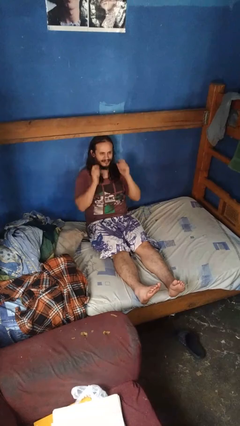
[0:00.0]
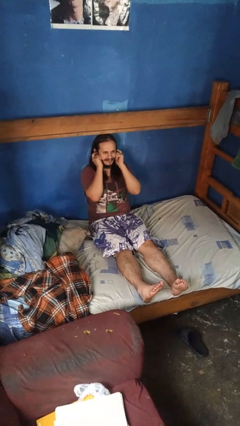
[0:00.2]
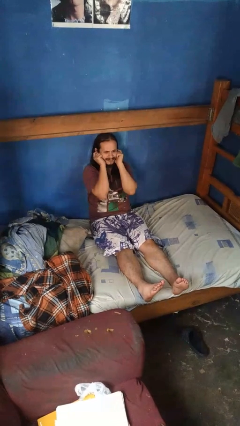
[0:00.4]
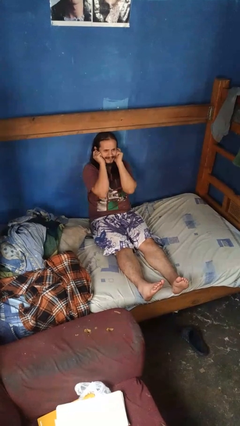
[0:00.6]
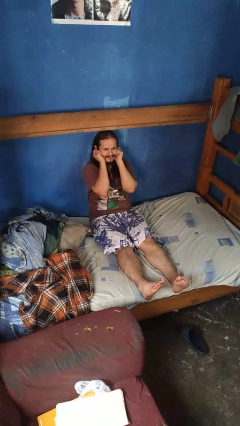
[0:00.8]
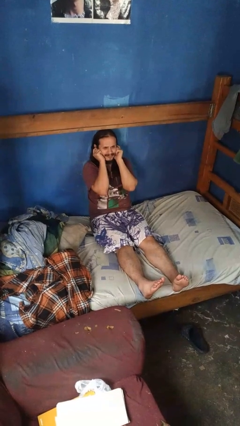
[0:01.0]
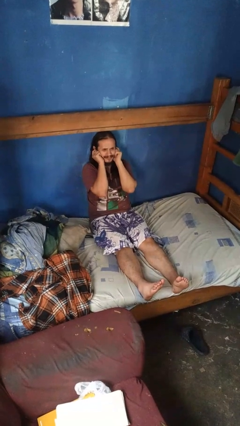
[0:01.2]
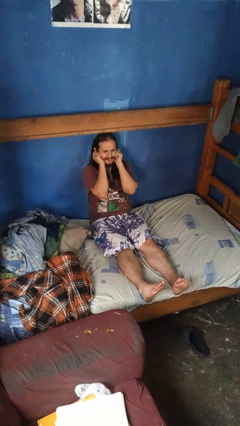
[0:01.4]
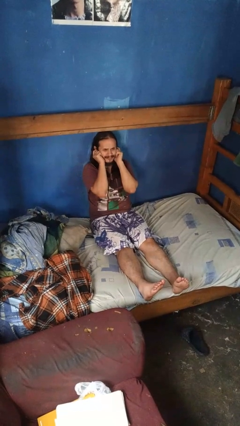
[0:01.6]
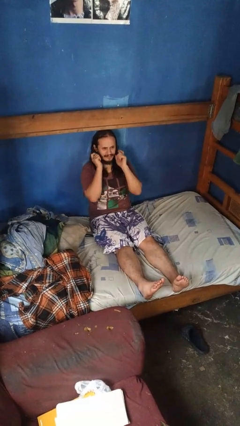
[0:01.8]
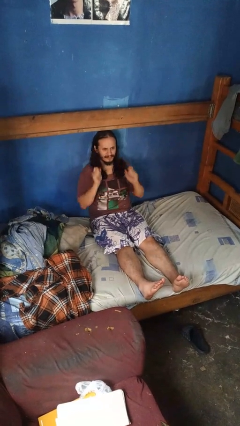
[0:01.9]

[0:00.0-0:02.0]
person puts fingers in ear

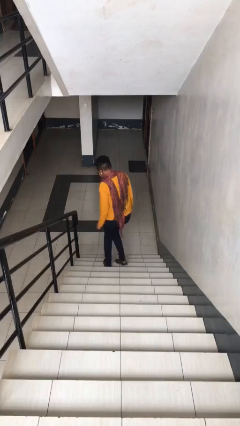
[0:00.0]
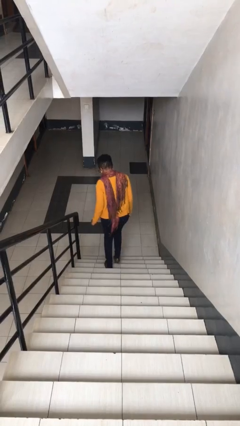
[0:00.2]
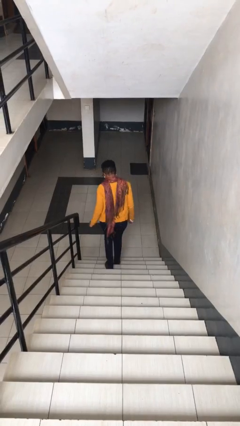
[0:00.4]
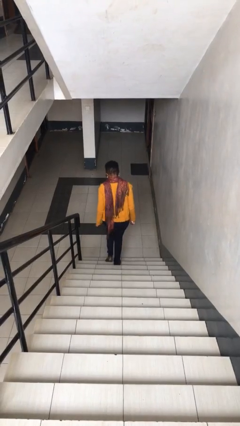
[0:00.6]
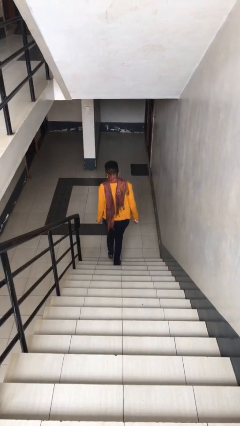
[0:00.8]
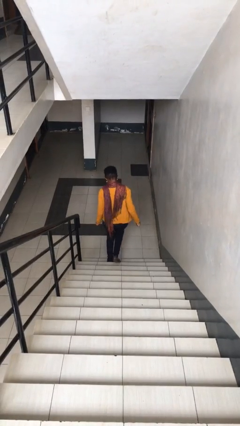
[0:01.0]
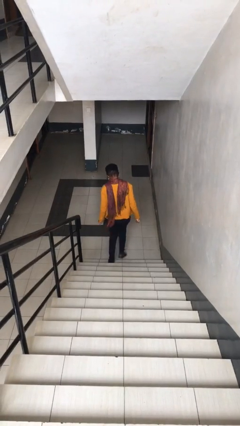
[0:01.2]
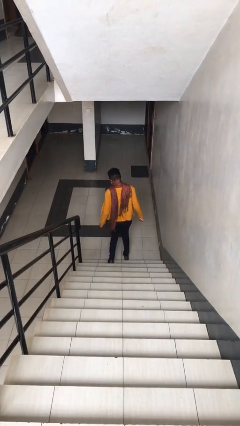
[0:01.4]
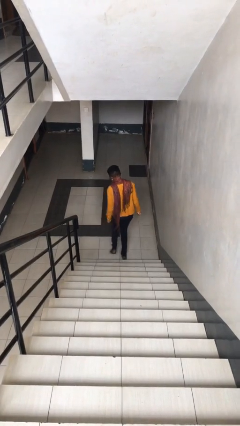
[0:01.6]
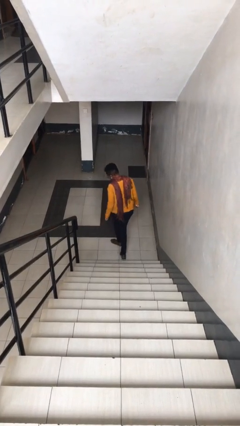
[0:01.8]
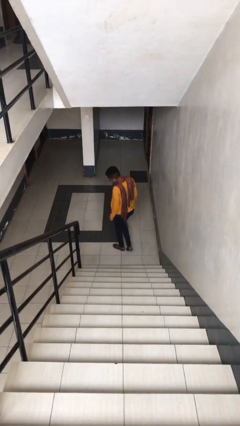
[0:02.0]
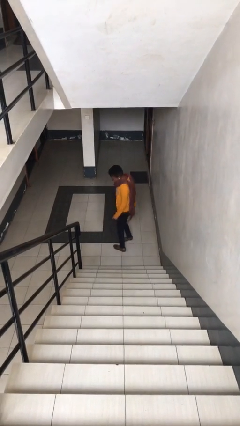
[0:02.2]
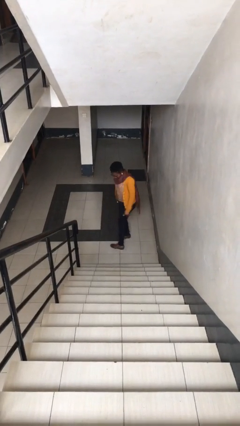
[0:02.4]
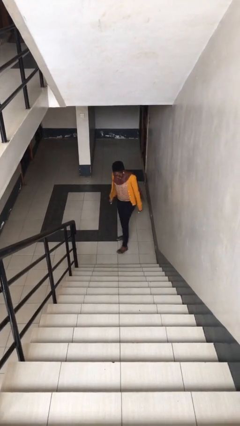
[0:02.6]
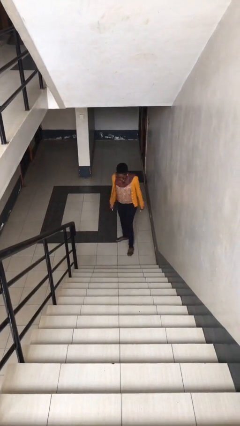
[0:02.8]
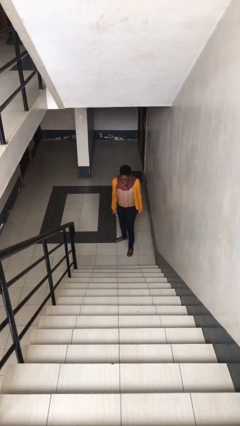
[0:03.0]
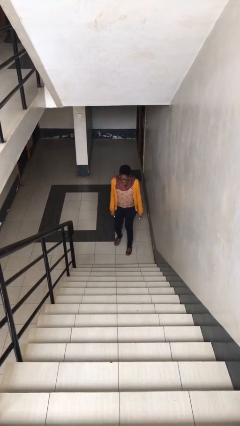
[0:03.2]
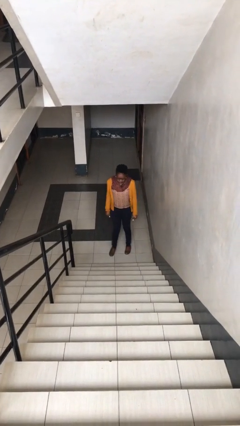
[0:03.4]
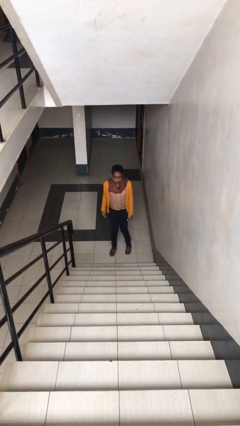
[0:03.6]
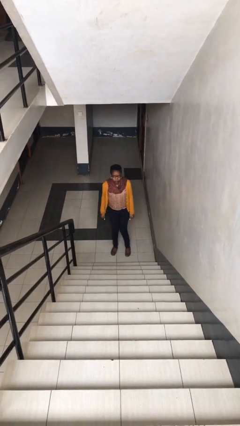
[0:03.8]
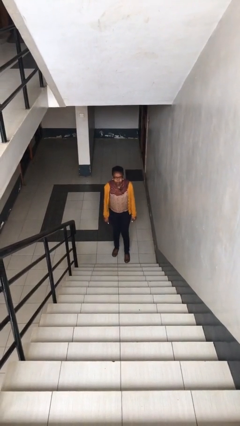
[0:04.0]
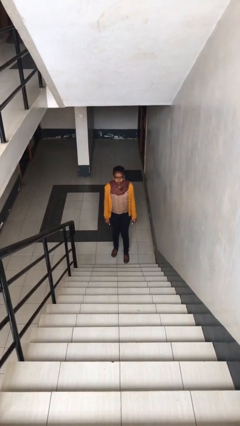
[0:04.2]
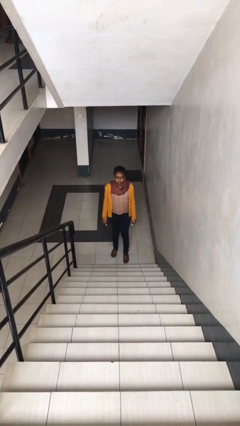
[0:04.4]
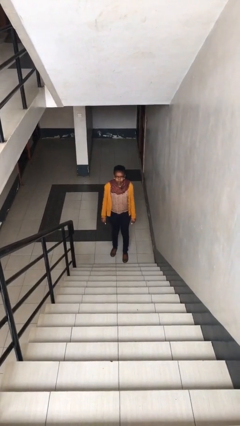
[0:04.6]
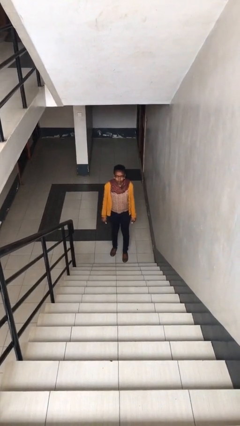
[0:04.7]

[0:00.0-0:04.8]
person climbs down stairs

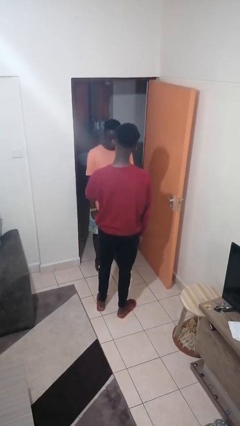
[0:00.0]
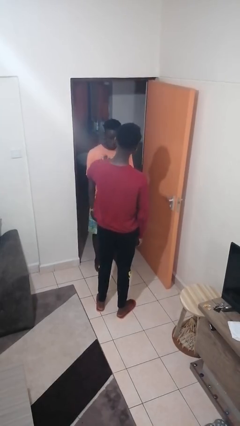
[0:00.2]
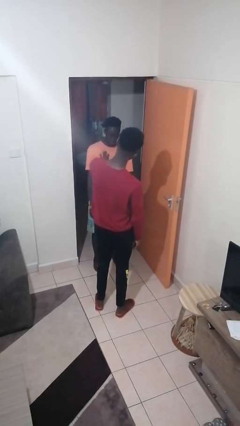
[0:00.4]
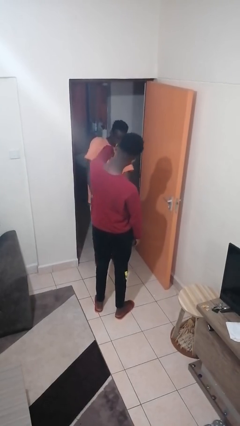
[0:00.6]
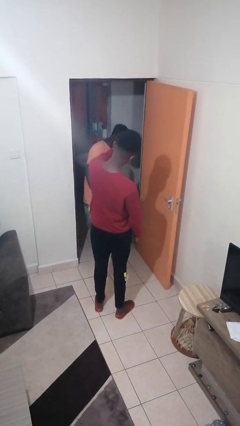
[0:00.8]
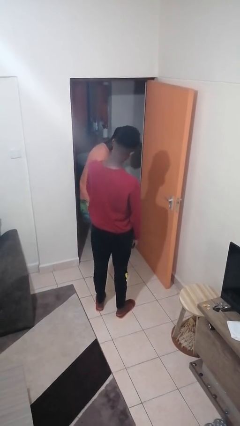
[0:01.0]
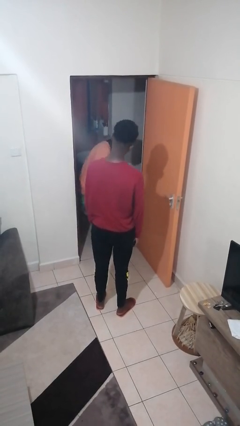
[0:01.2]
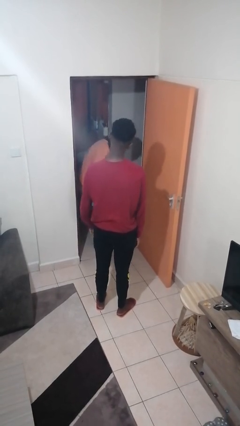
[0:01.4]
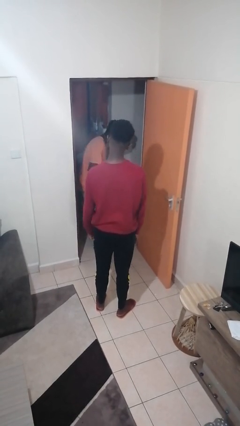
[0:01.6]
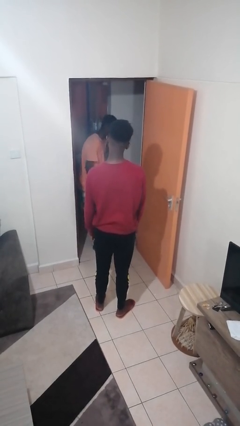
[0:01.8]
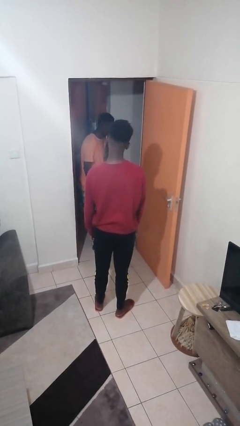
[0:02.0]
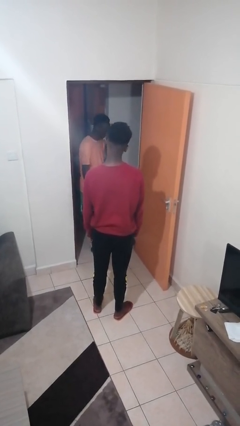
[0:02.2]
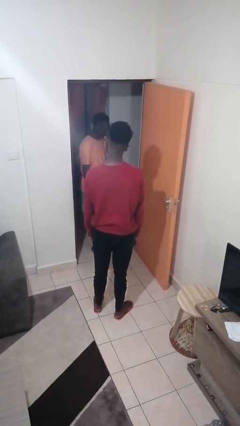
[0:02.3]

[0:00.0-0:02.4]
person shoves person

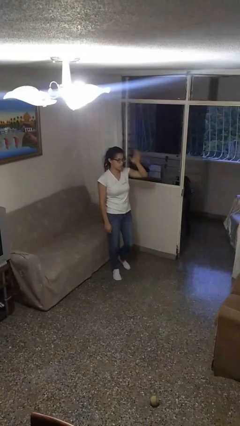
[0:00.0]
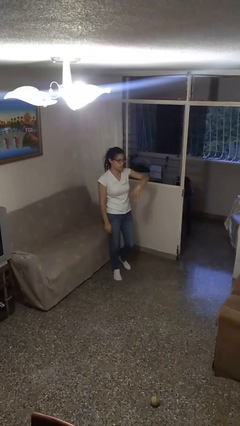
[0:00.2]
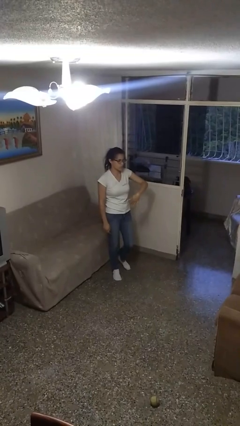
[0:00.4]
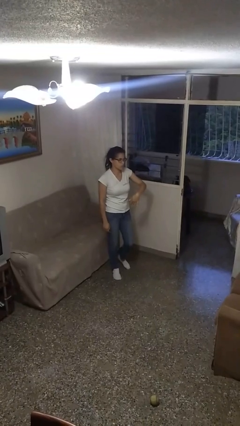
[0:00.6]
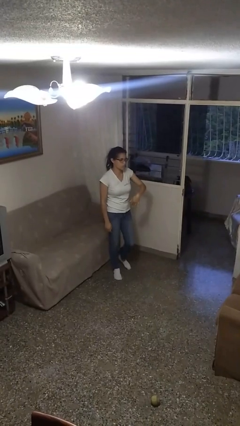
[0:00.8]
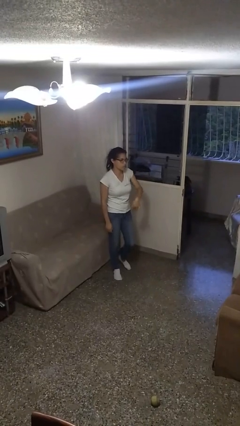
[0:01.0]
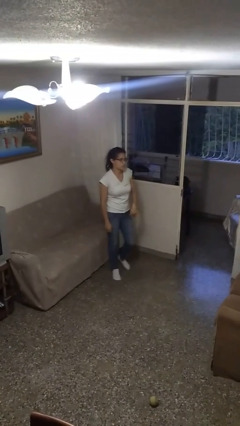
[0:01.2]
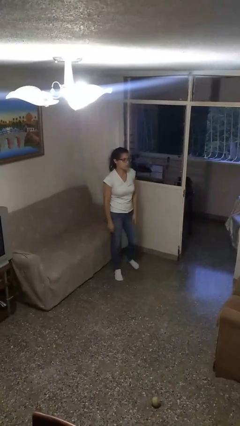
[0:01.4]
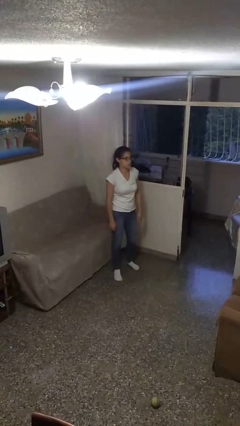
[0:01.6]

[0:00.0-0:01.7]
person gestures swipe down

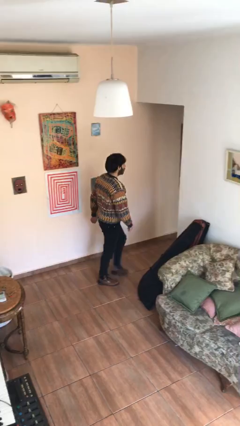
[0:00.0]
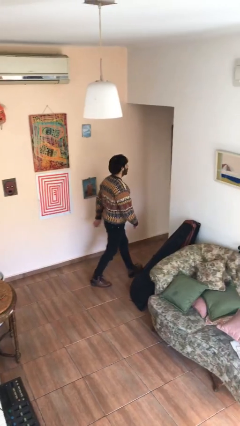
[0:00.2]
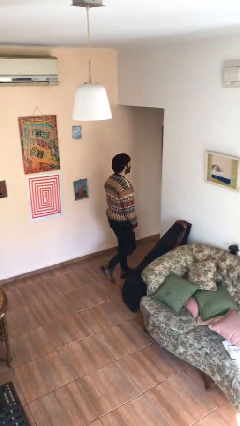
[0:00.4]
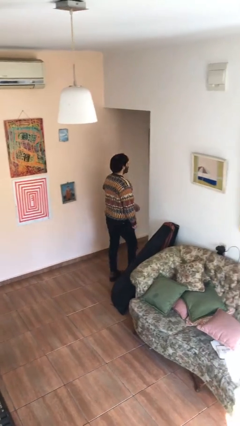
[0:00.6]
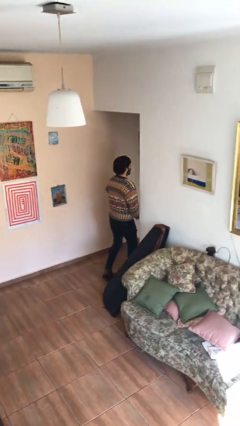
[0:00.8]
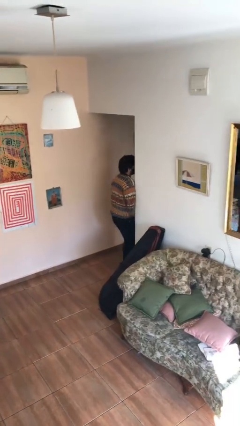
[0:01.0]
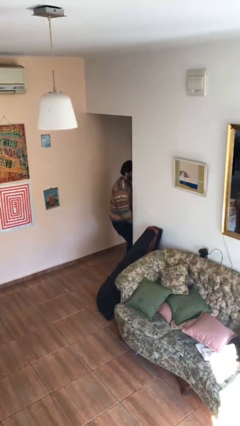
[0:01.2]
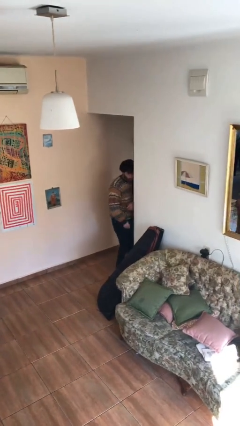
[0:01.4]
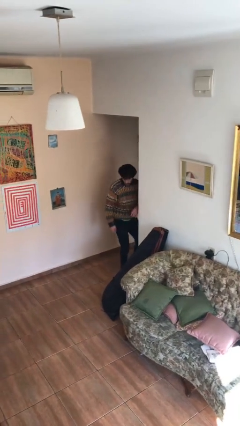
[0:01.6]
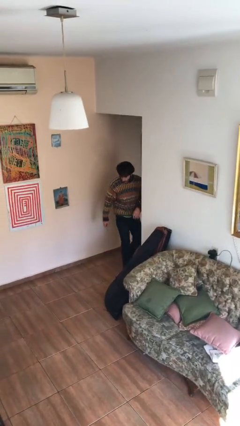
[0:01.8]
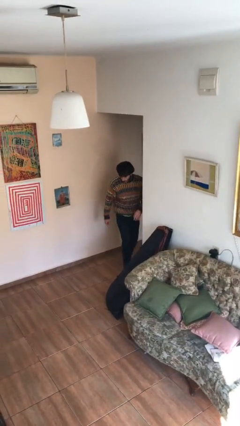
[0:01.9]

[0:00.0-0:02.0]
person bumps into wall

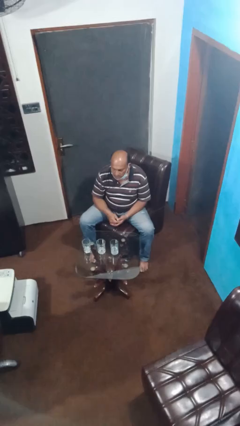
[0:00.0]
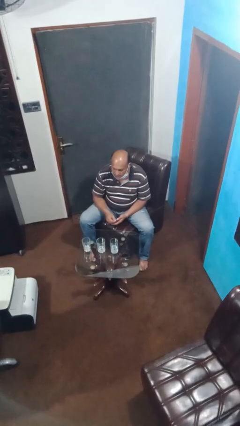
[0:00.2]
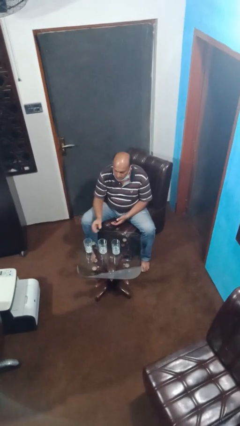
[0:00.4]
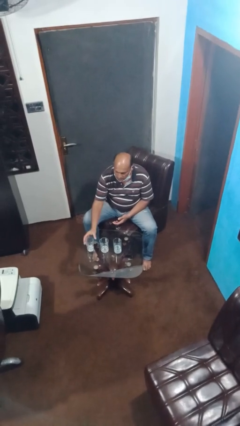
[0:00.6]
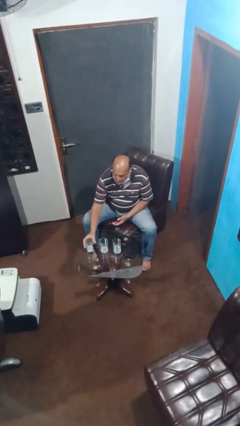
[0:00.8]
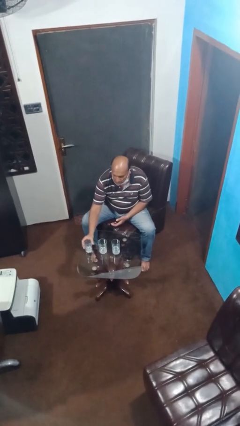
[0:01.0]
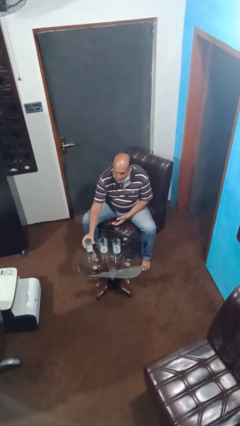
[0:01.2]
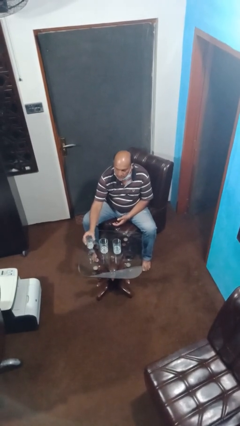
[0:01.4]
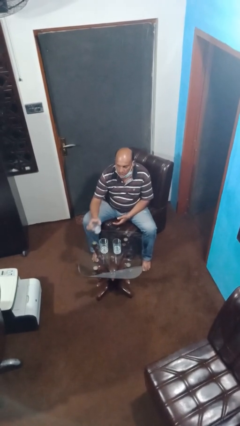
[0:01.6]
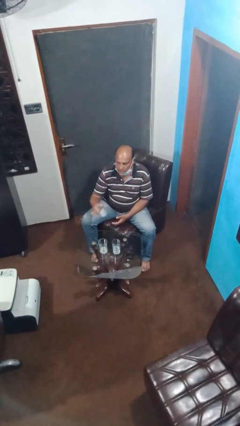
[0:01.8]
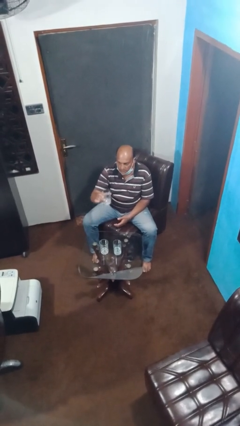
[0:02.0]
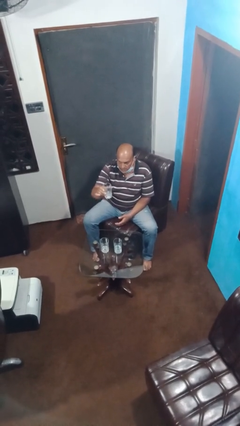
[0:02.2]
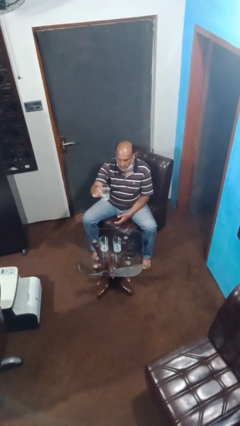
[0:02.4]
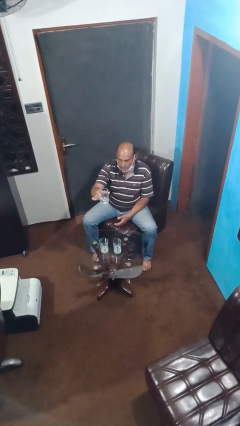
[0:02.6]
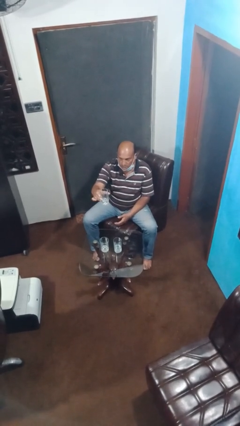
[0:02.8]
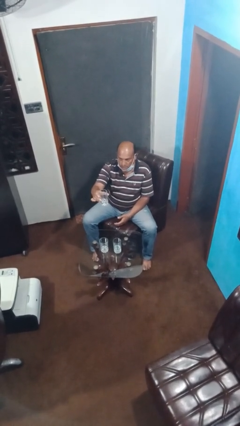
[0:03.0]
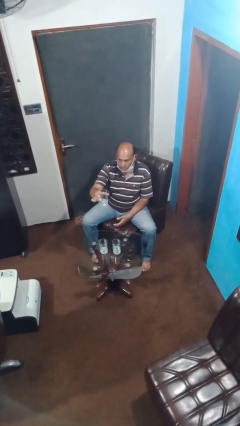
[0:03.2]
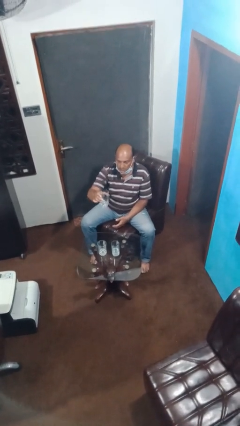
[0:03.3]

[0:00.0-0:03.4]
person picks up object from table

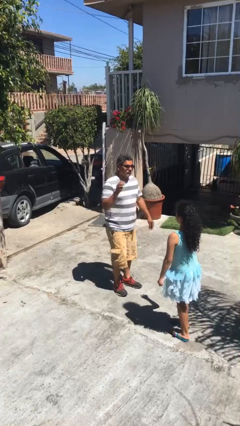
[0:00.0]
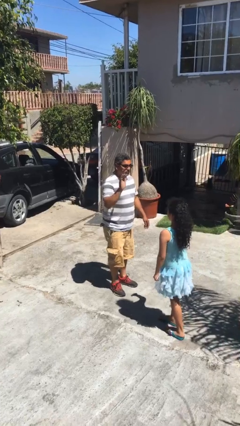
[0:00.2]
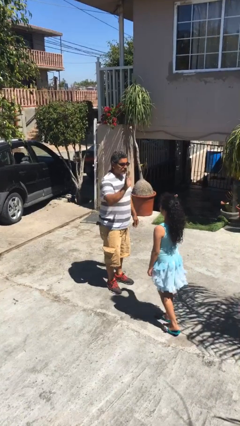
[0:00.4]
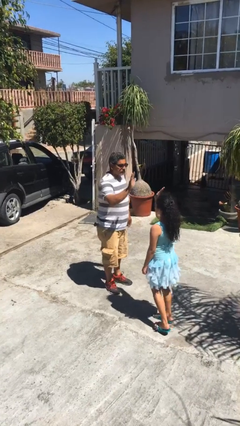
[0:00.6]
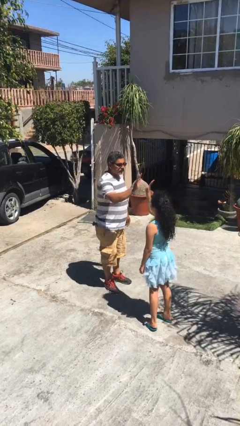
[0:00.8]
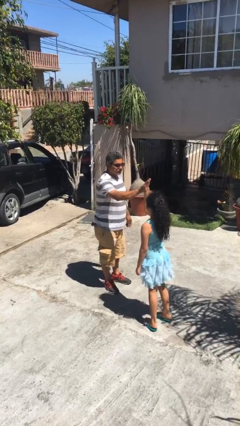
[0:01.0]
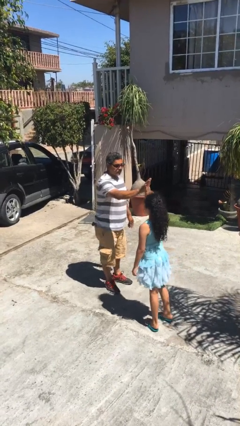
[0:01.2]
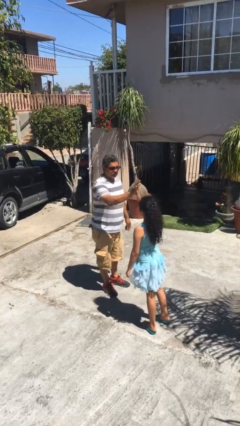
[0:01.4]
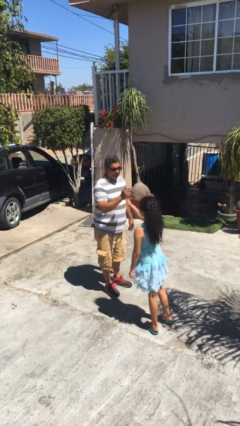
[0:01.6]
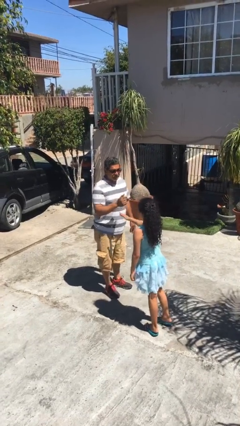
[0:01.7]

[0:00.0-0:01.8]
person highfives hand
